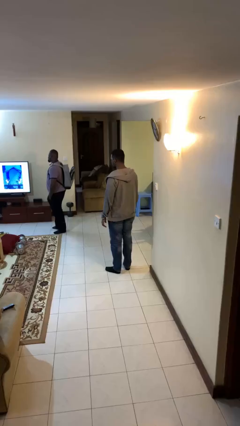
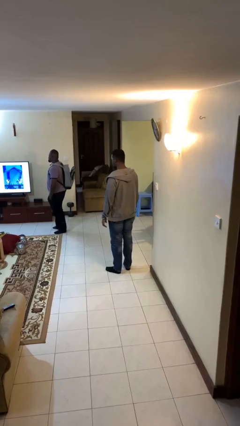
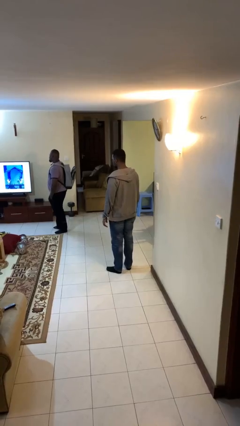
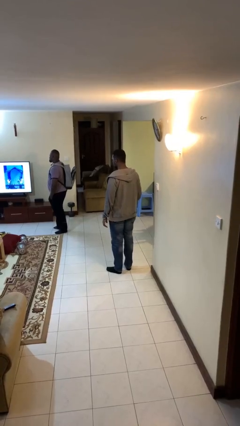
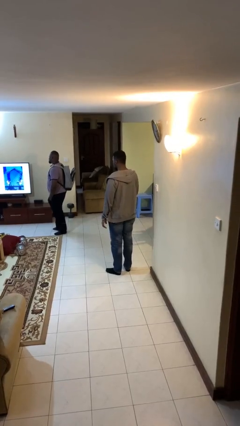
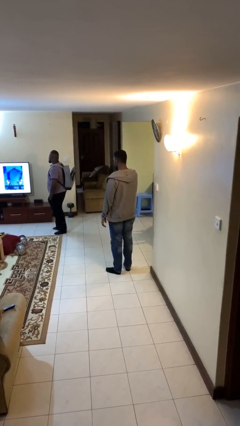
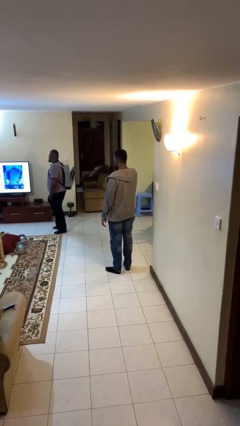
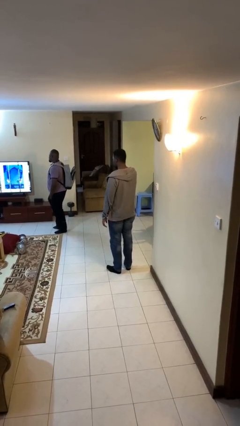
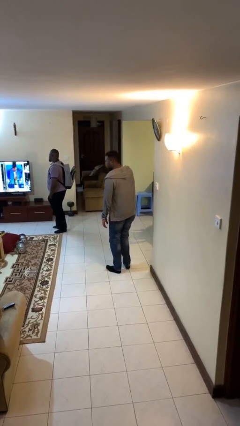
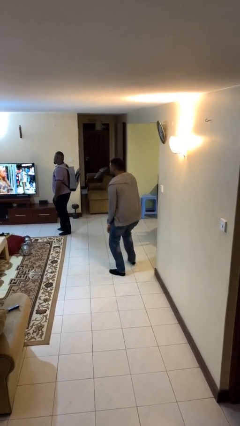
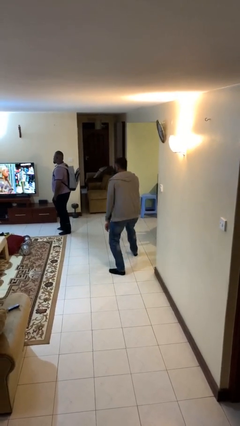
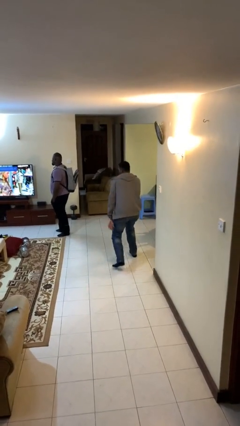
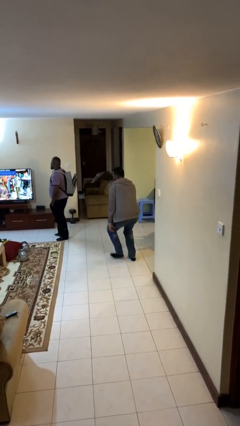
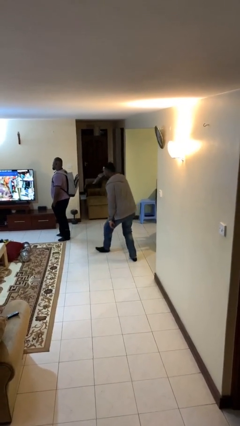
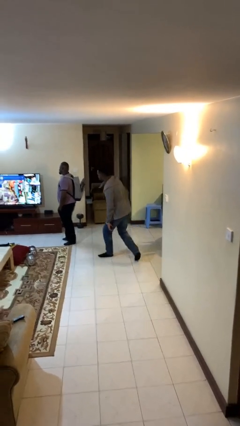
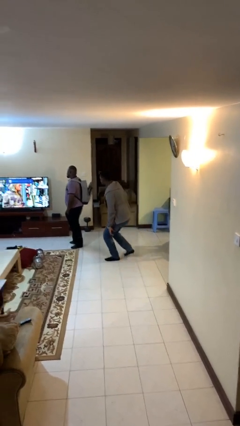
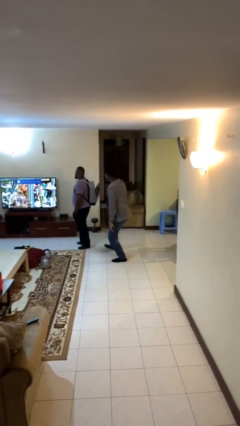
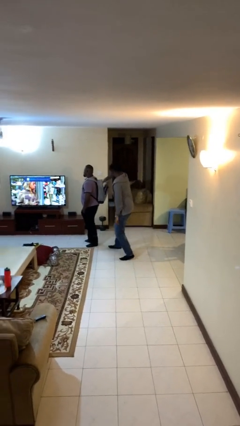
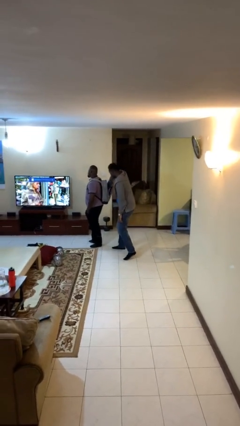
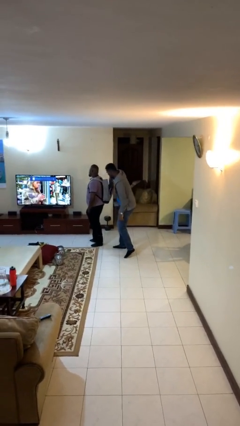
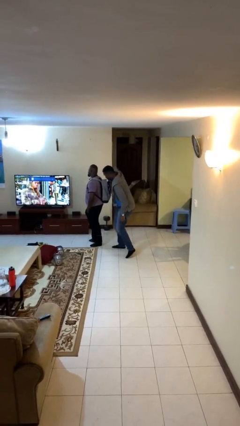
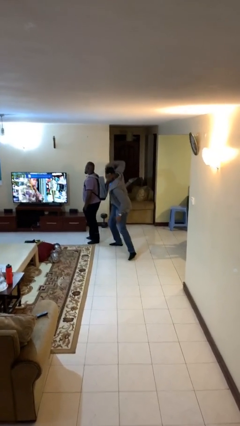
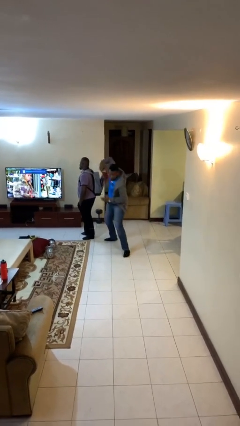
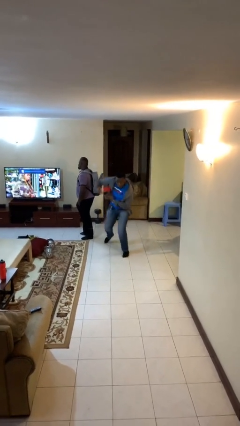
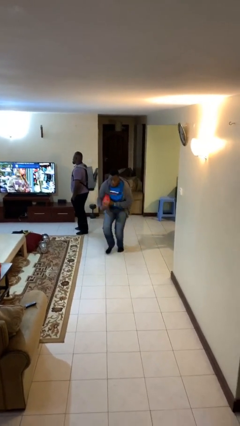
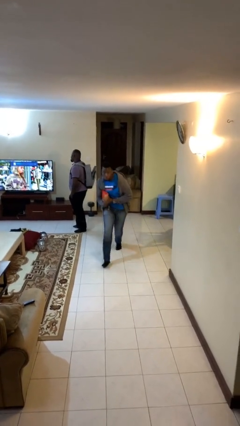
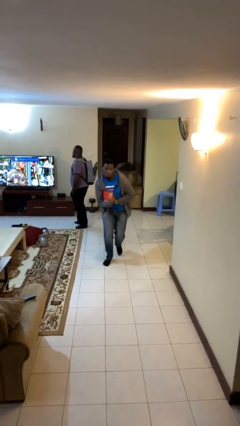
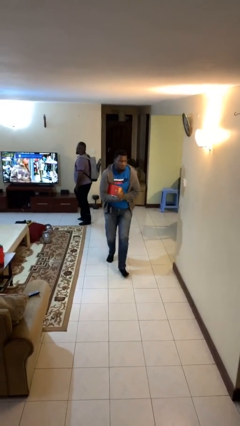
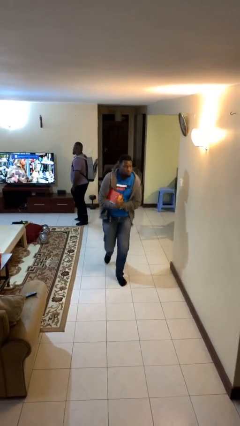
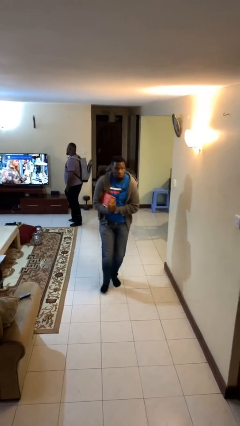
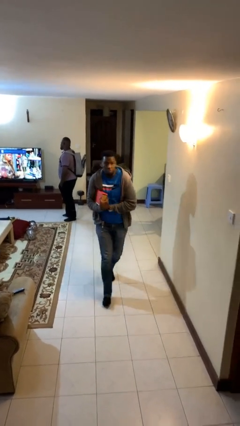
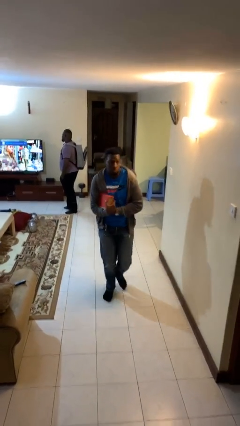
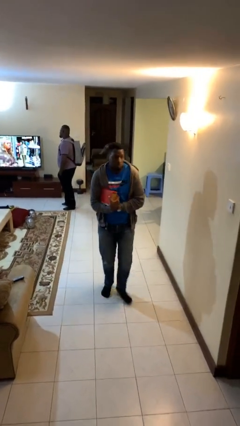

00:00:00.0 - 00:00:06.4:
person steals object from person

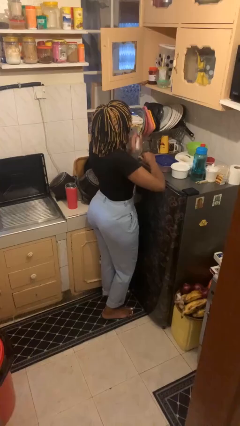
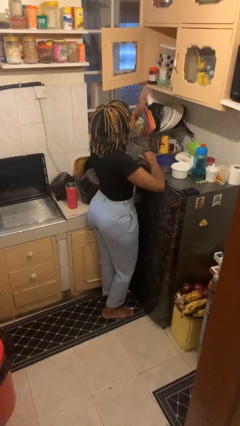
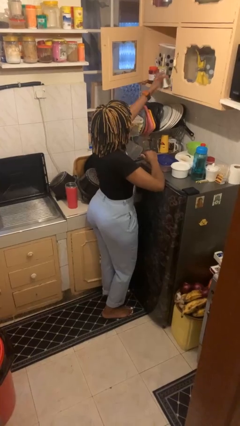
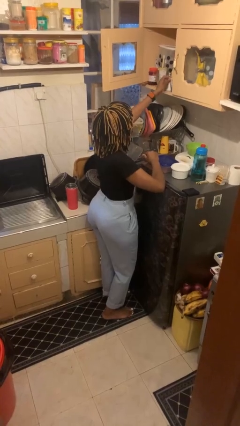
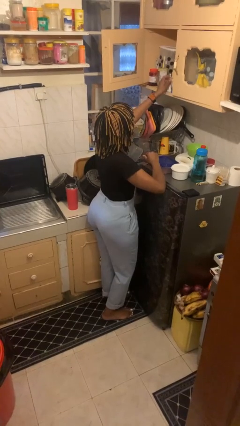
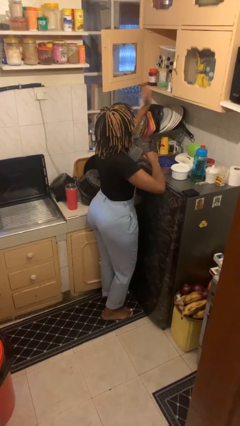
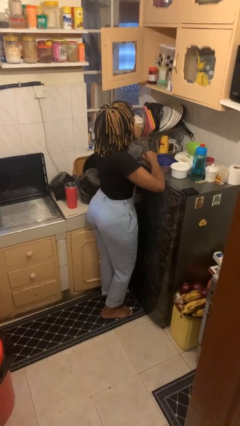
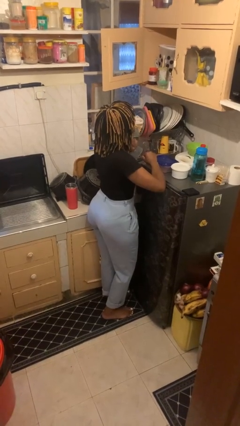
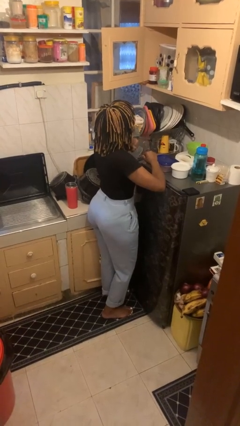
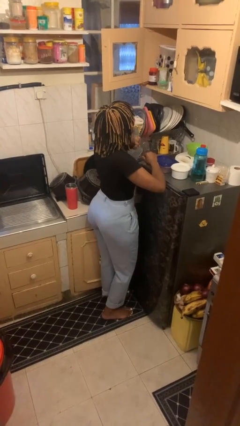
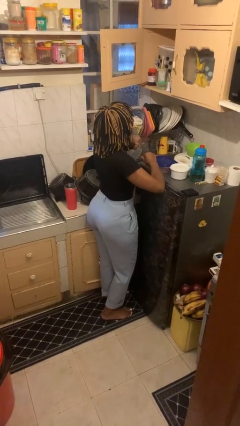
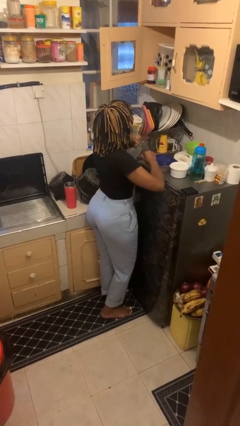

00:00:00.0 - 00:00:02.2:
person puts object in cabinet

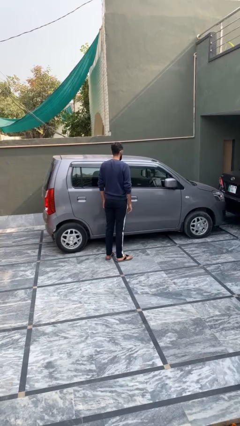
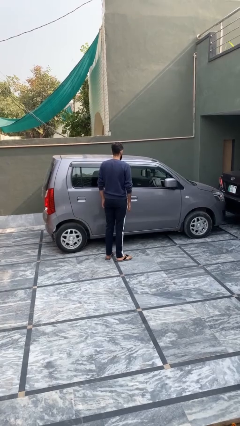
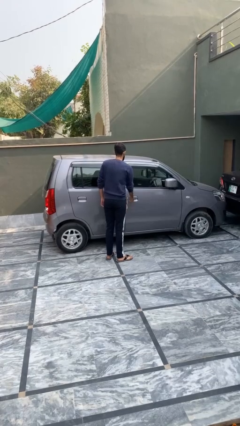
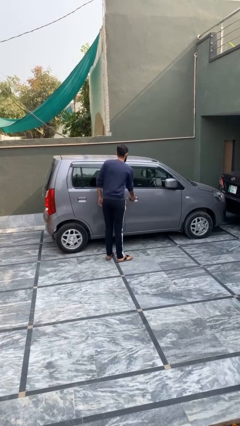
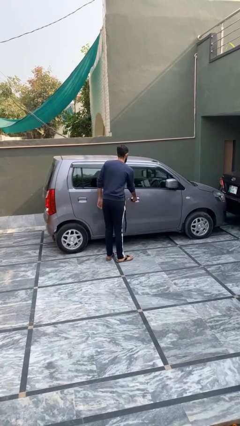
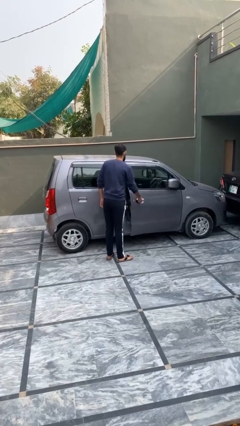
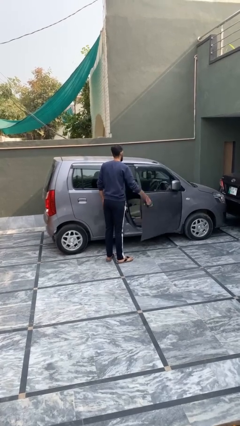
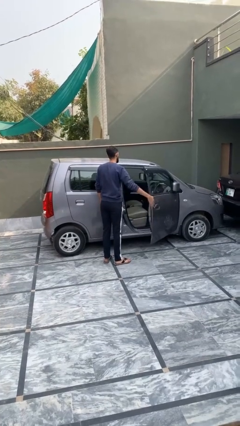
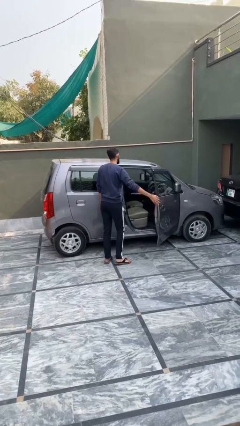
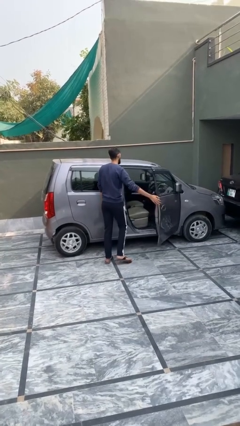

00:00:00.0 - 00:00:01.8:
person opens car door

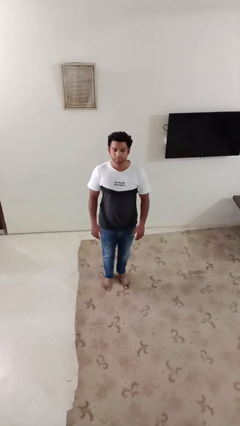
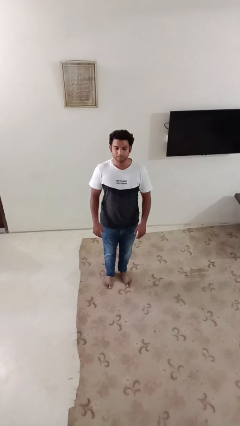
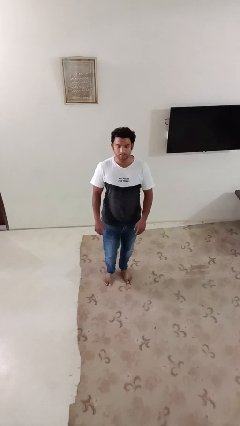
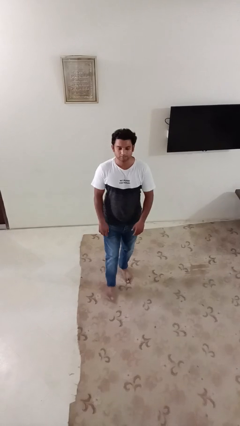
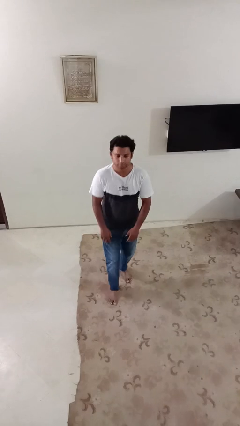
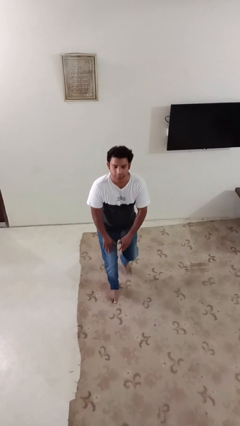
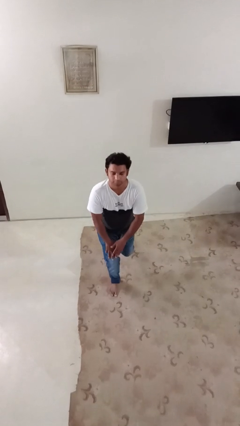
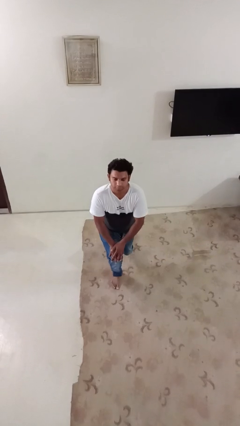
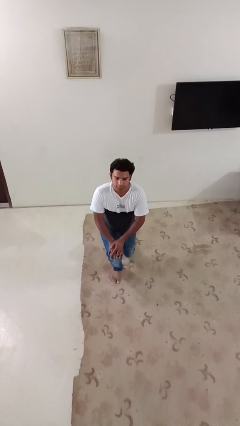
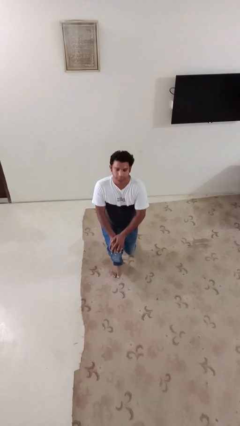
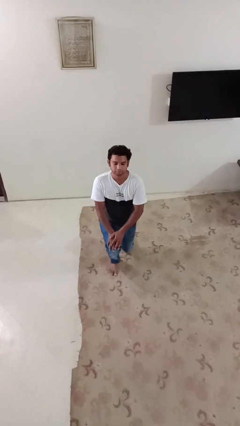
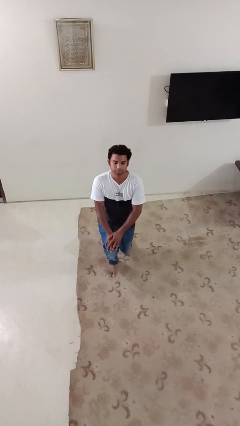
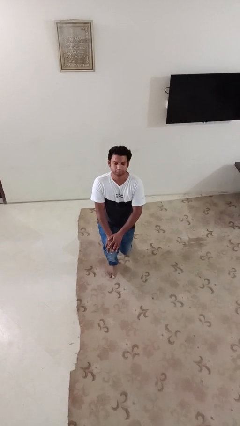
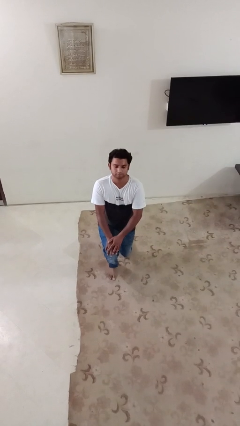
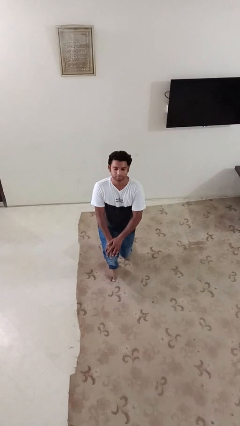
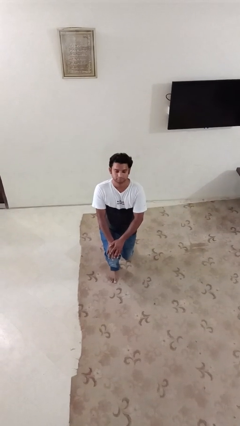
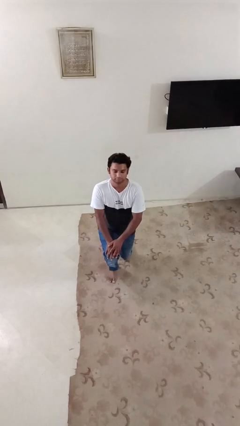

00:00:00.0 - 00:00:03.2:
person kneels

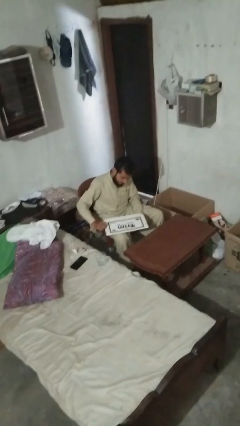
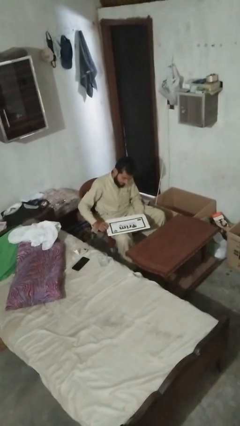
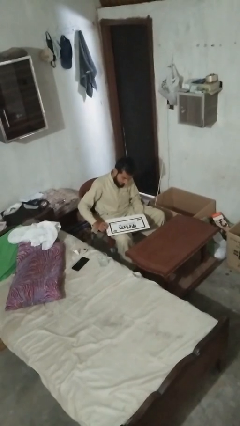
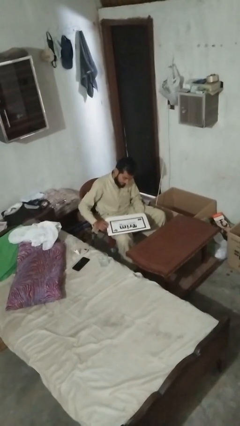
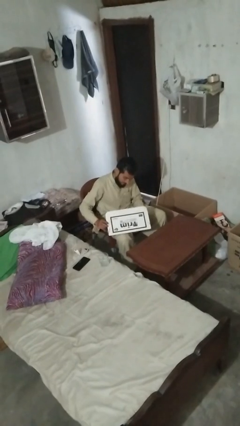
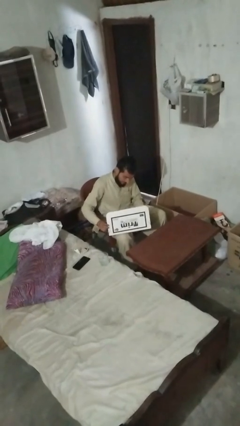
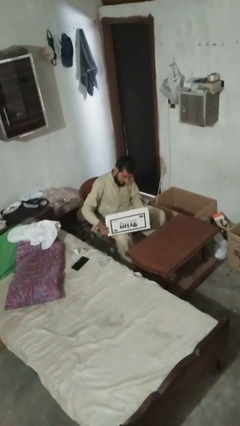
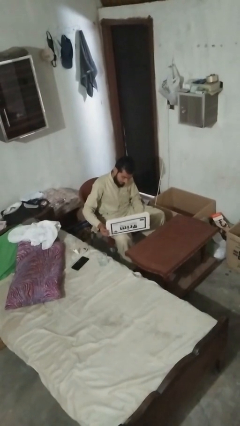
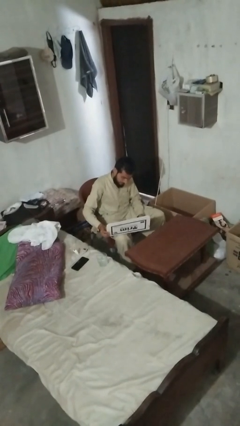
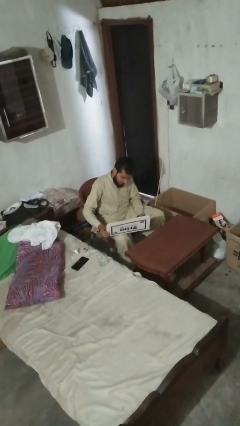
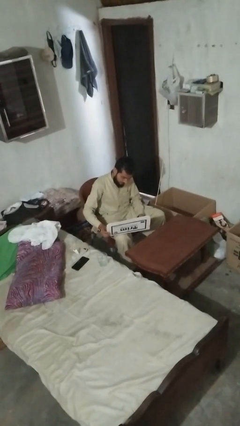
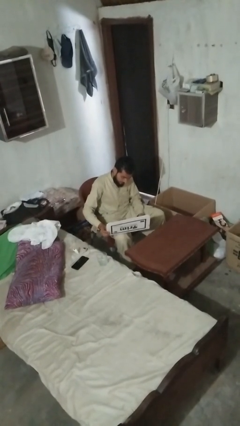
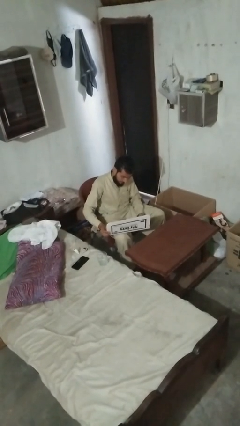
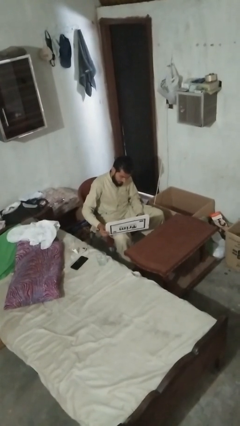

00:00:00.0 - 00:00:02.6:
person opens laptop

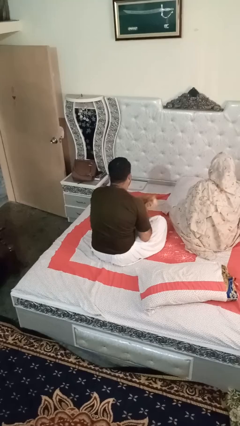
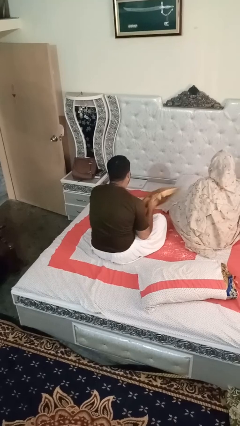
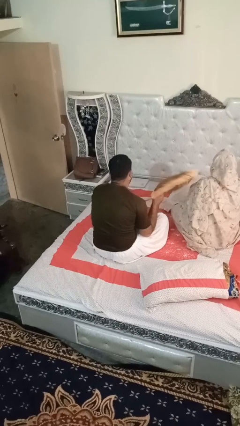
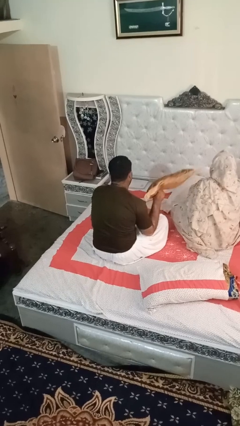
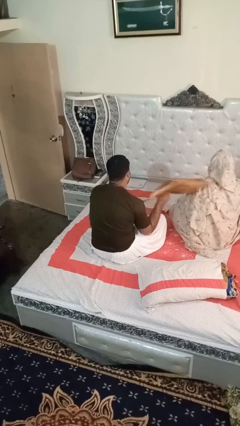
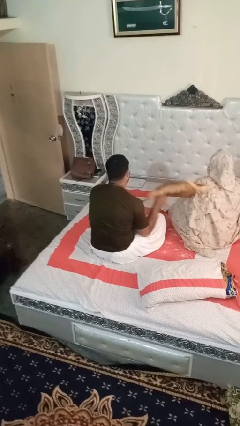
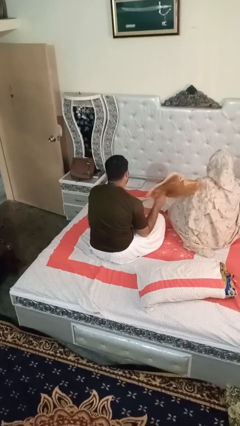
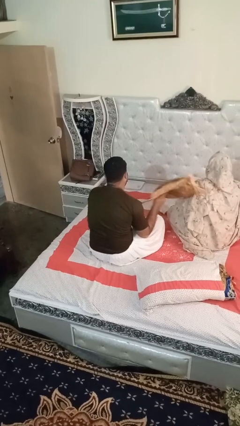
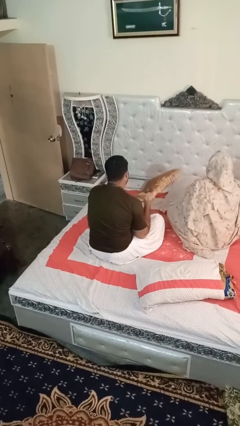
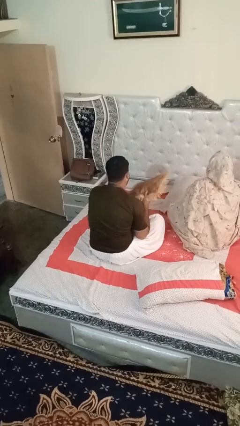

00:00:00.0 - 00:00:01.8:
person hits person with pillow
